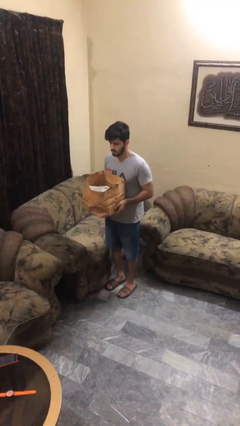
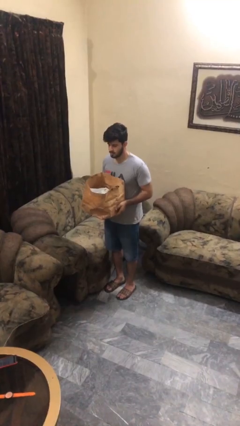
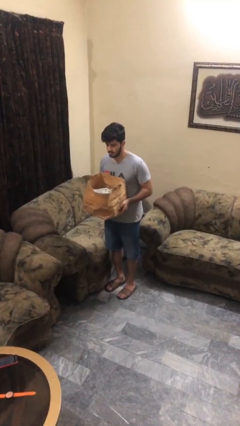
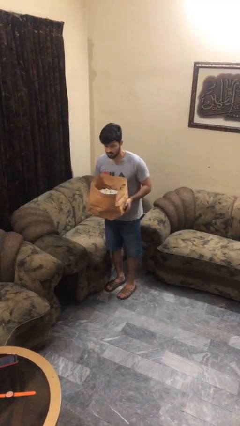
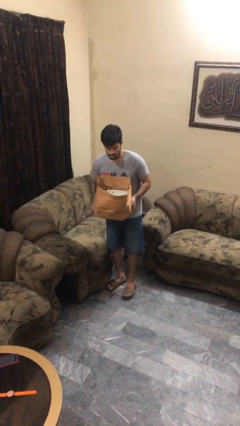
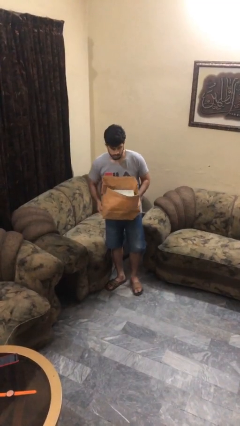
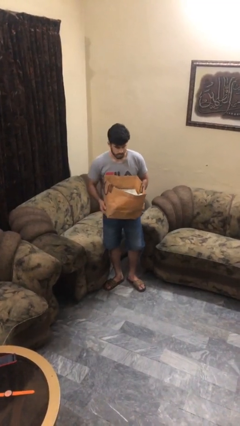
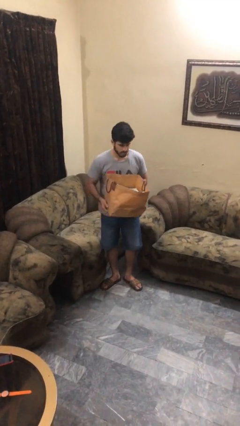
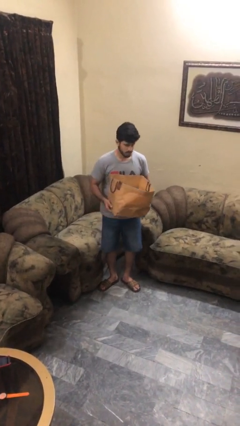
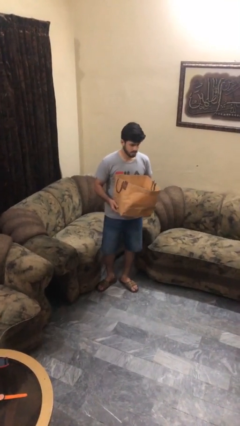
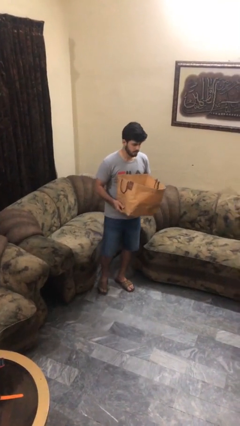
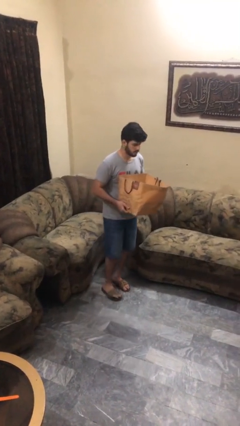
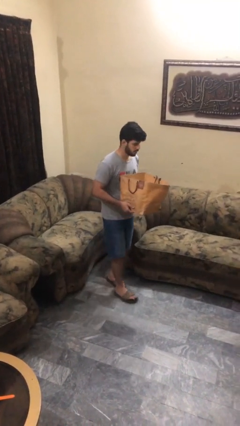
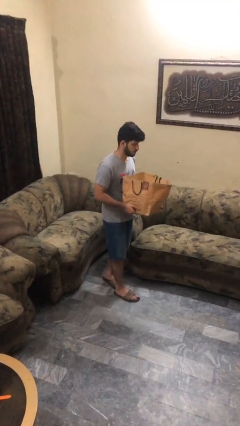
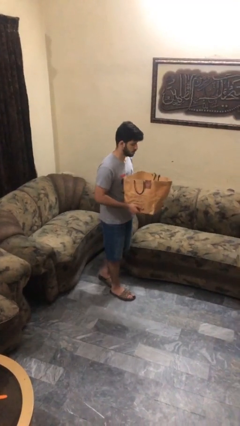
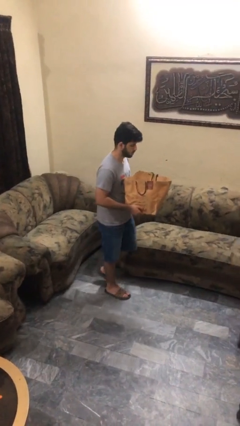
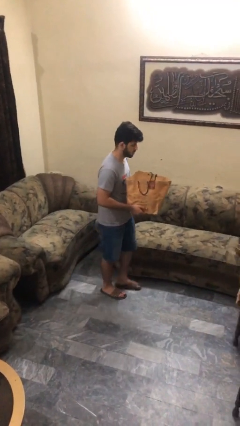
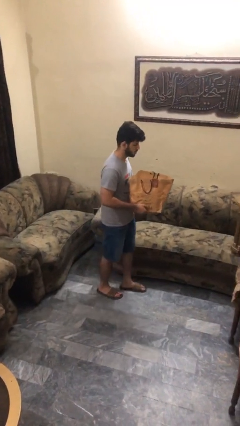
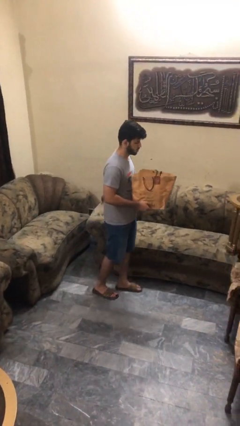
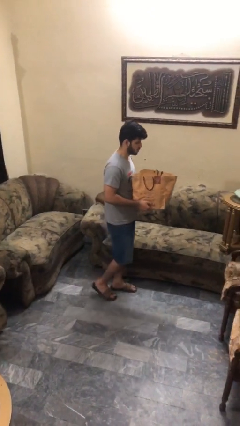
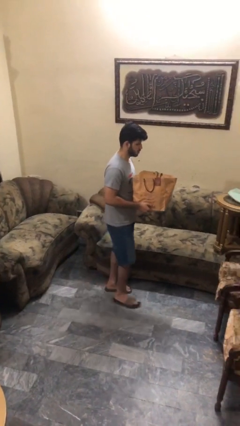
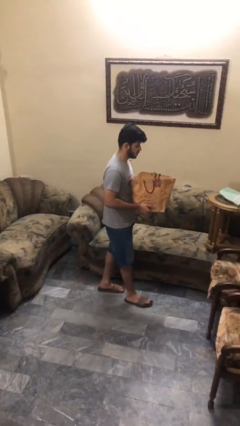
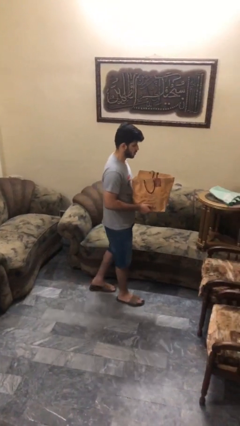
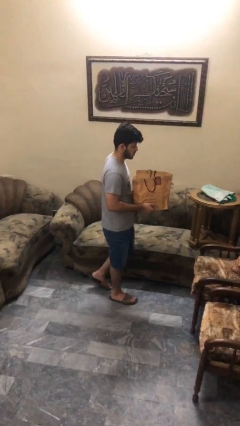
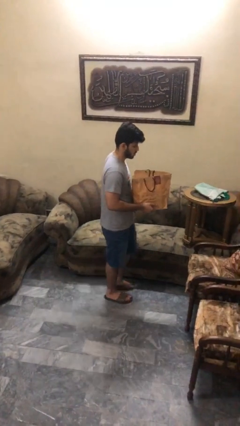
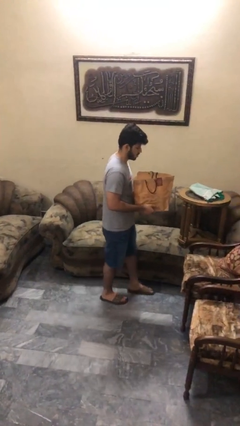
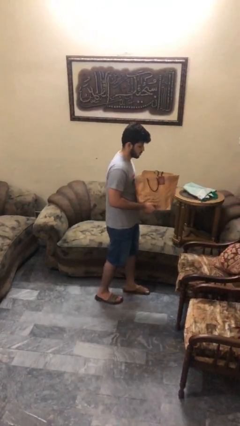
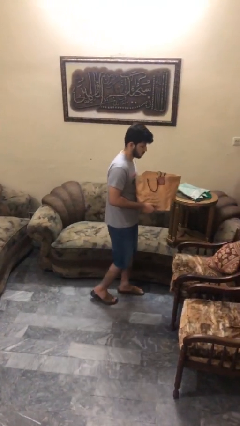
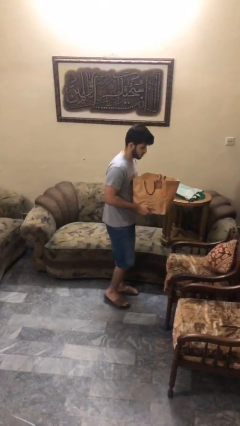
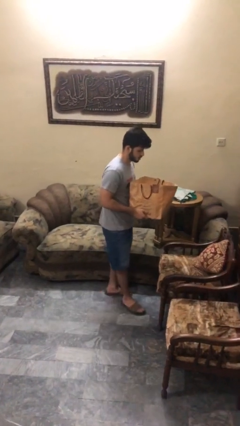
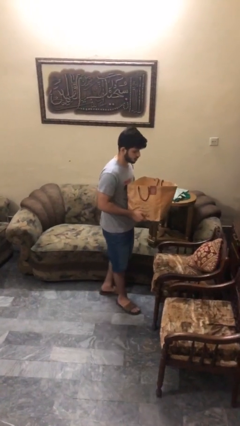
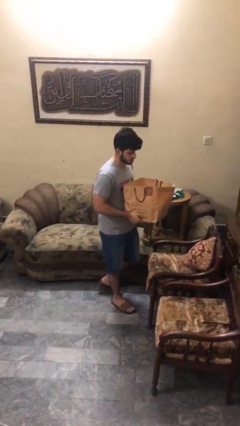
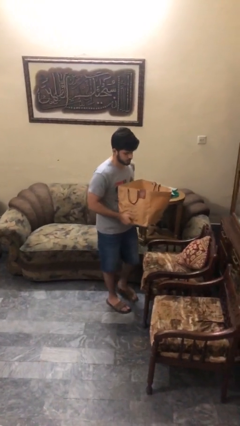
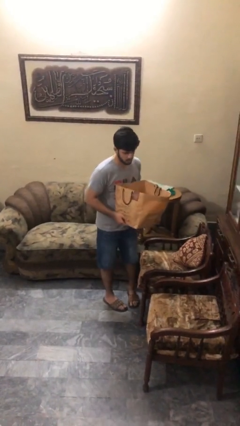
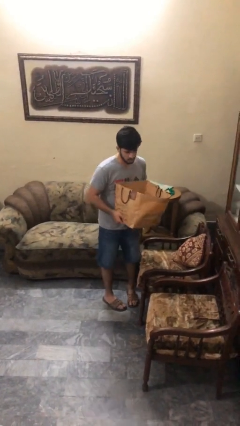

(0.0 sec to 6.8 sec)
person carries groceries

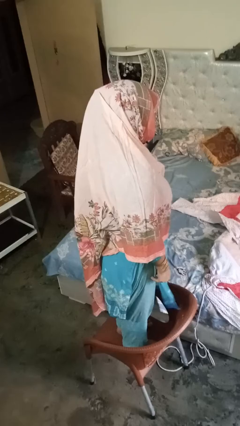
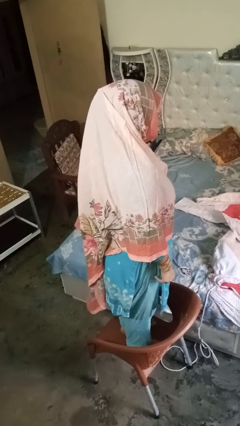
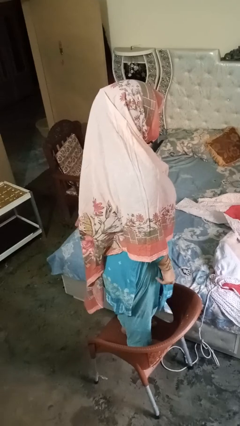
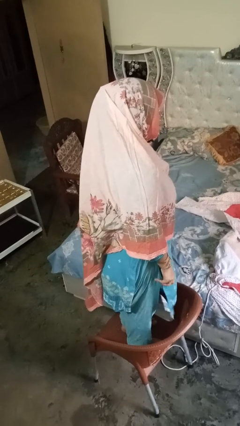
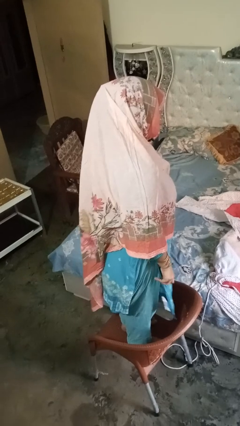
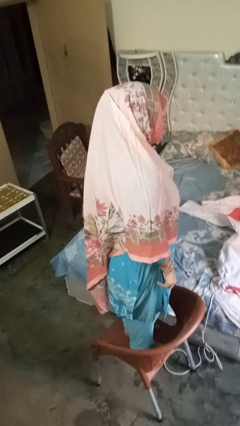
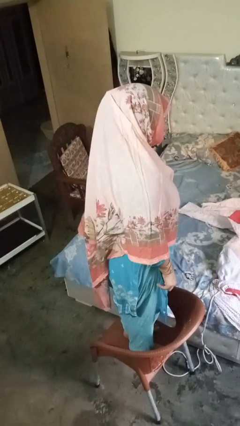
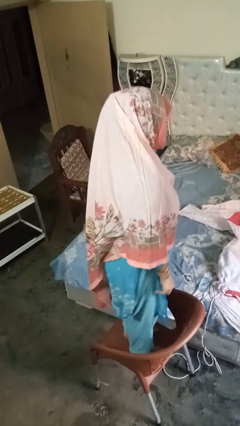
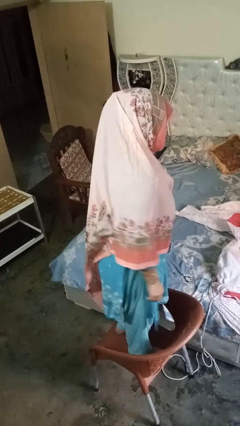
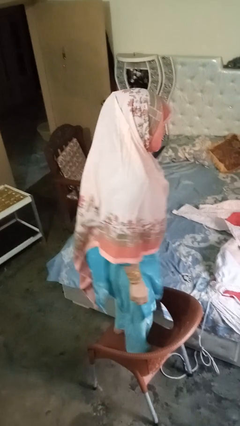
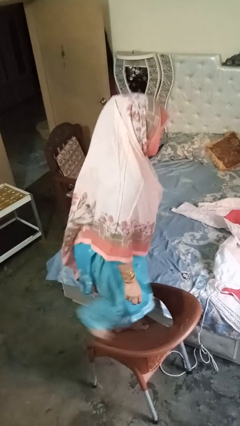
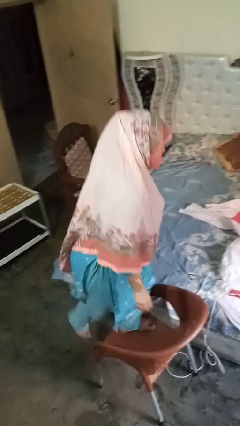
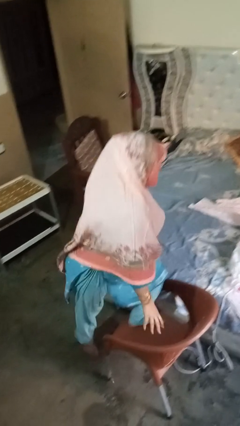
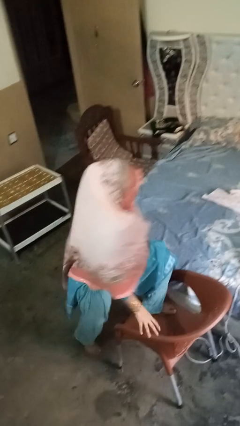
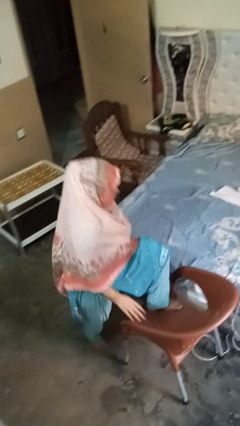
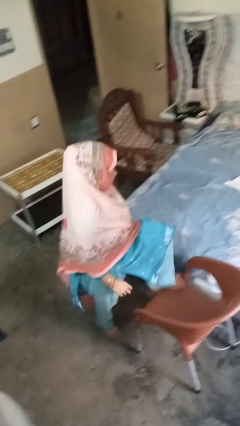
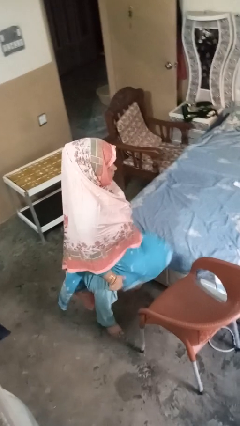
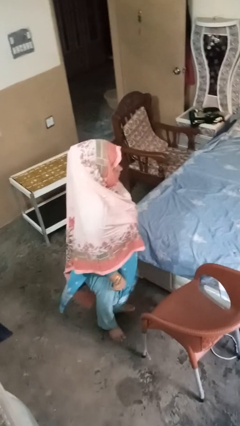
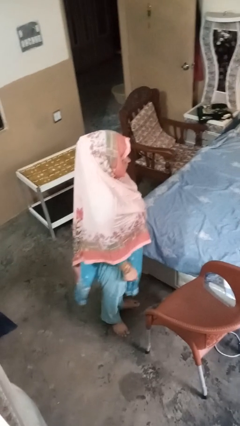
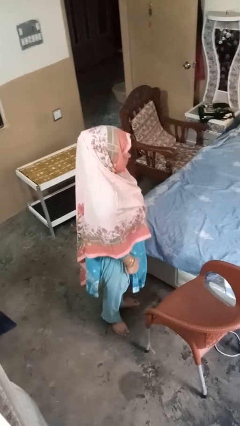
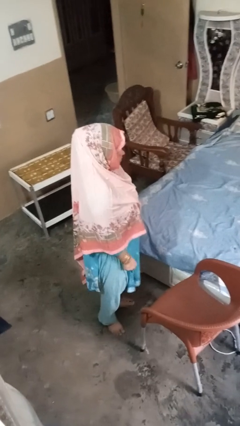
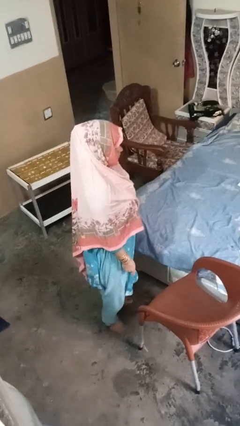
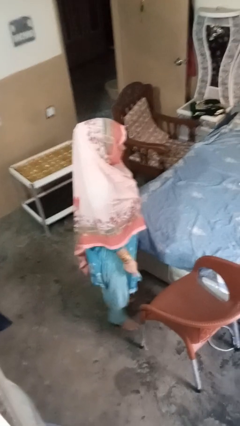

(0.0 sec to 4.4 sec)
person climbs off chair

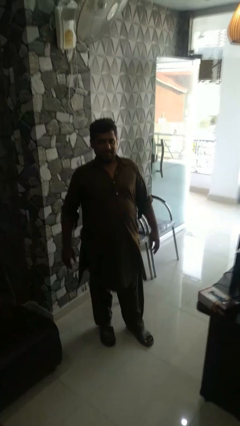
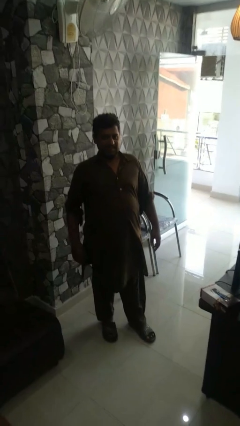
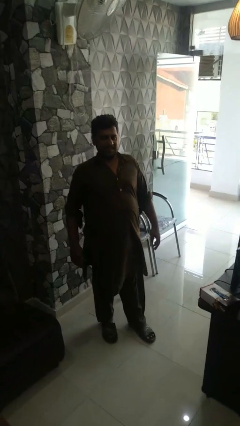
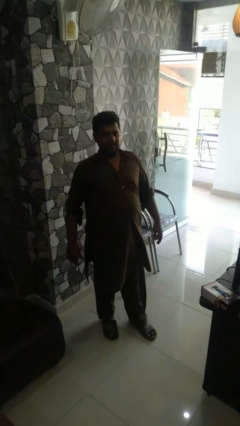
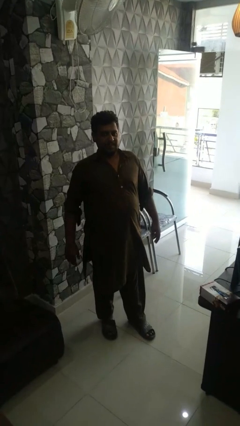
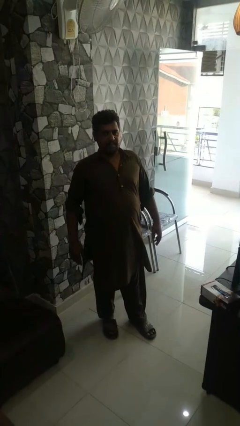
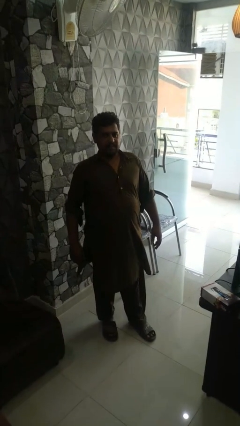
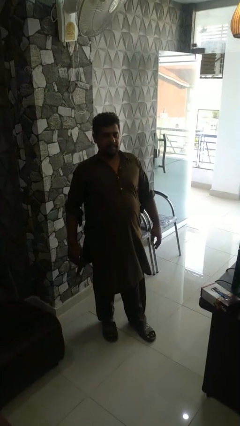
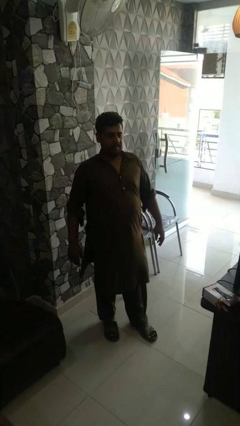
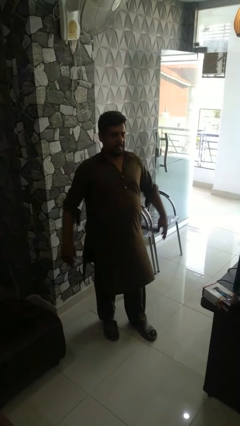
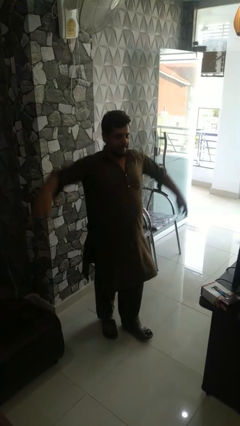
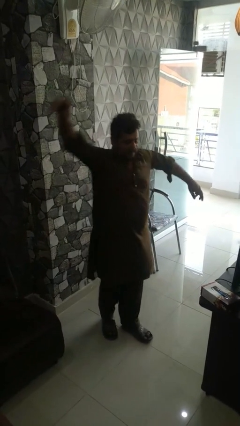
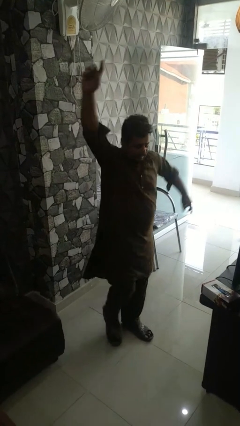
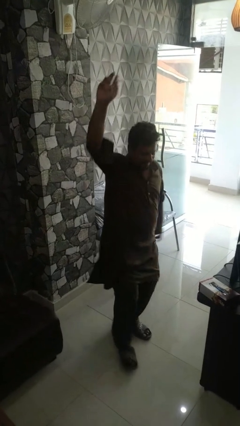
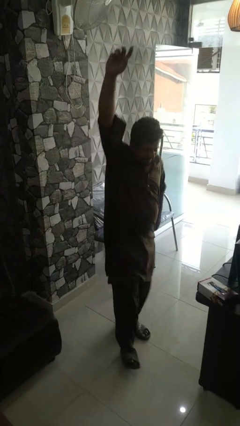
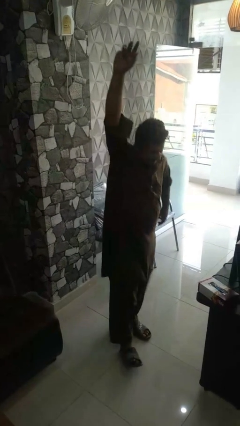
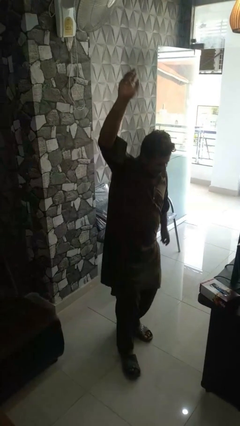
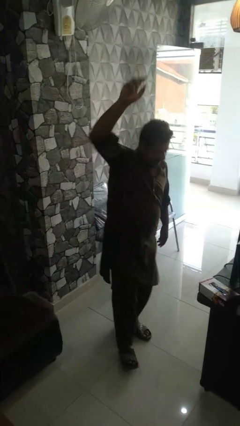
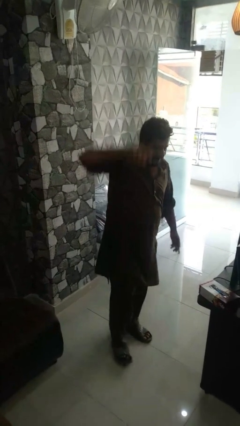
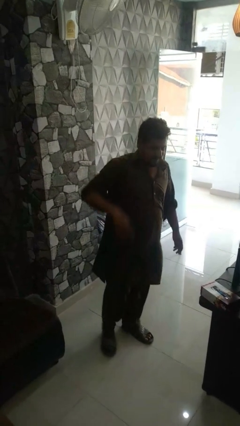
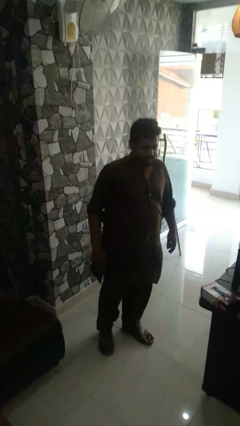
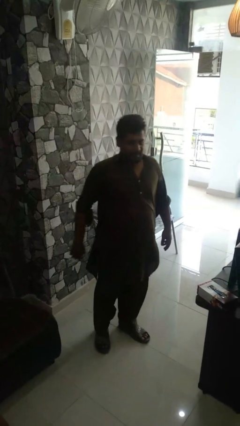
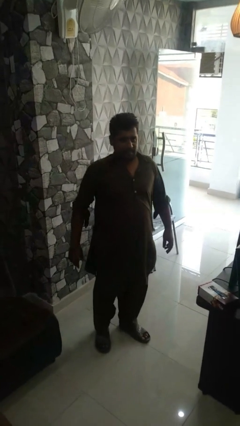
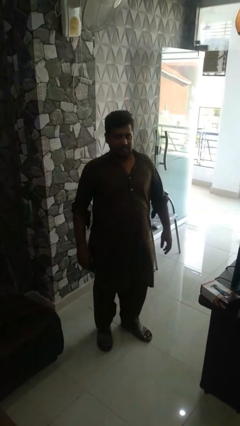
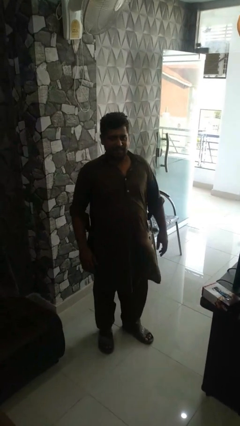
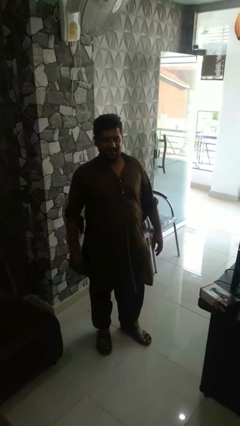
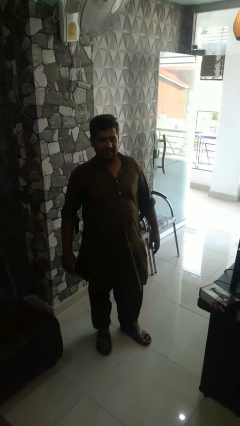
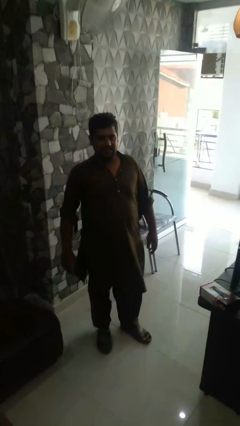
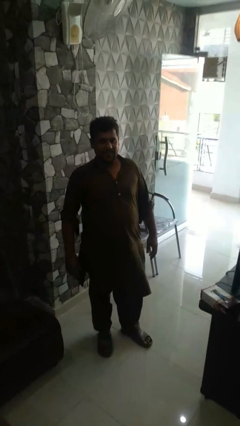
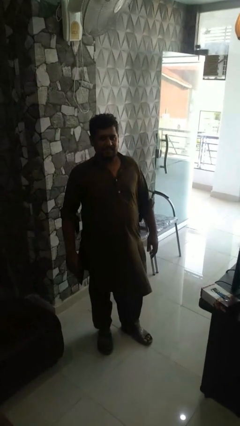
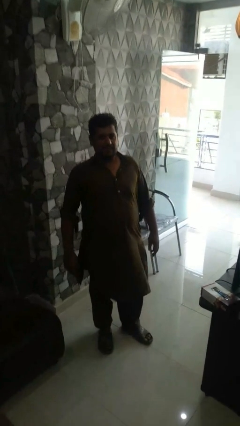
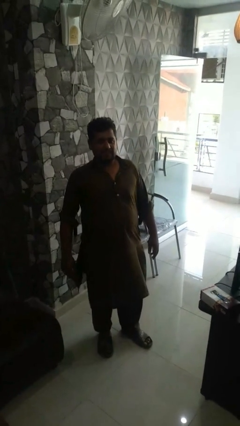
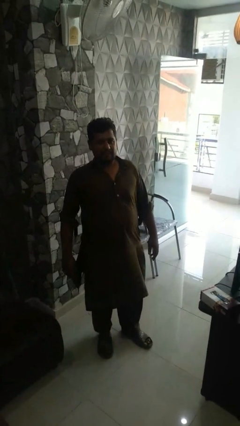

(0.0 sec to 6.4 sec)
person dances in place

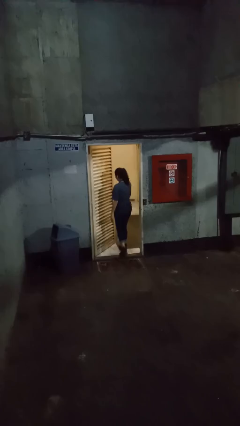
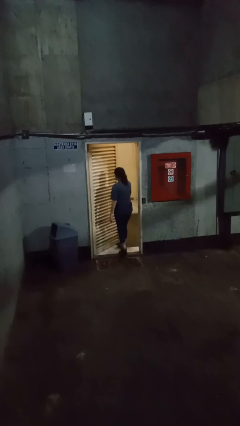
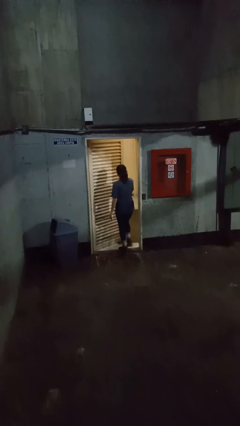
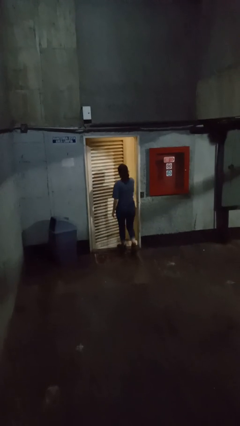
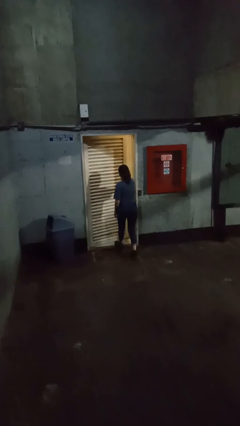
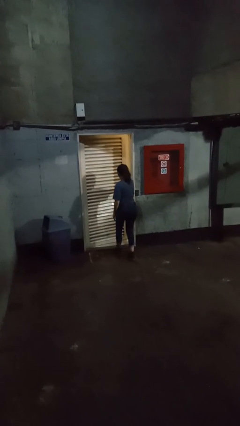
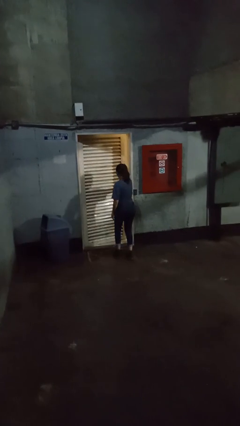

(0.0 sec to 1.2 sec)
person closes facility door
